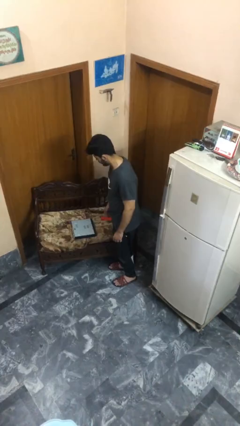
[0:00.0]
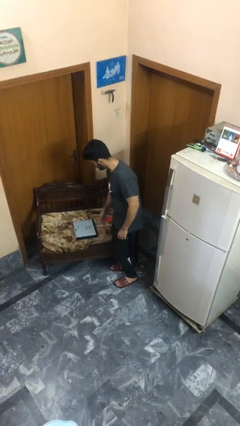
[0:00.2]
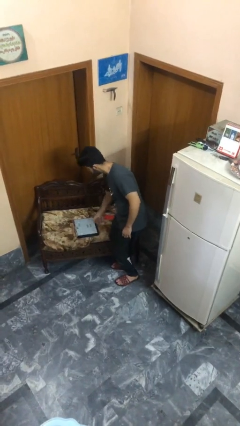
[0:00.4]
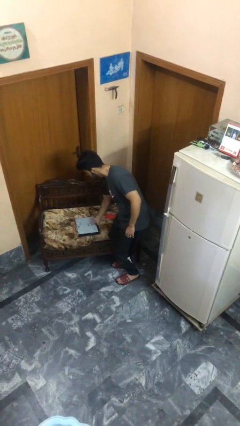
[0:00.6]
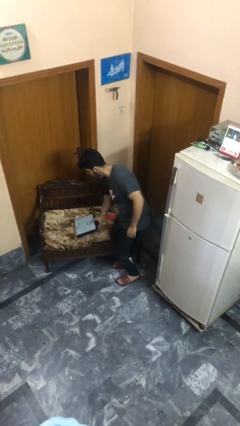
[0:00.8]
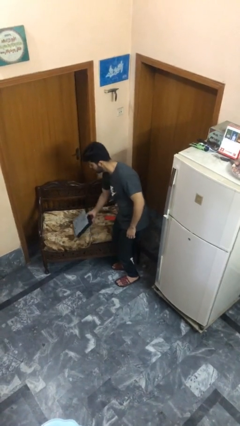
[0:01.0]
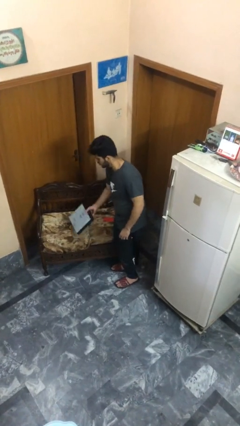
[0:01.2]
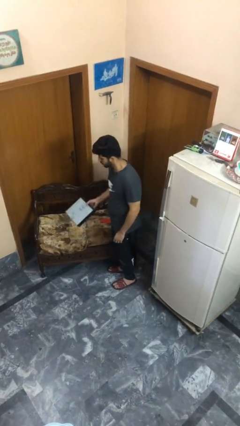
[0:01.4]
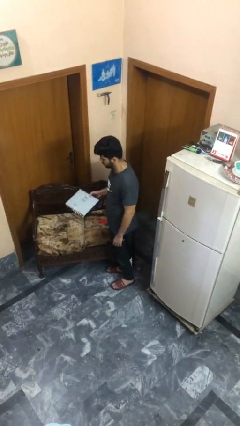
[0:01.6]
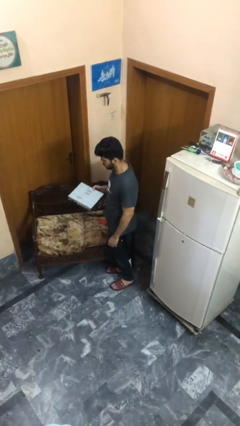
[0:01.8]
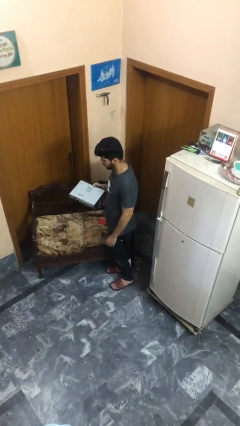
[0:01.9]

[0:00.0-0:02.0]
person picks up object from couch

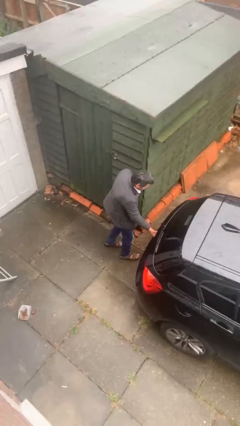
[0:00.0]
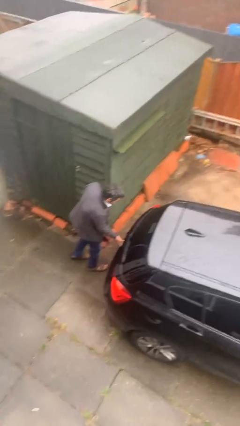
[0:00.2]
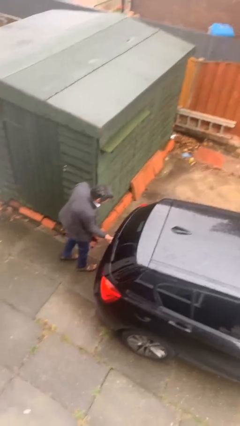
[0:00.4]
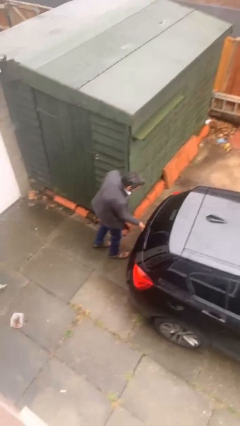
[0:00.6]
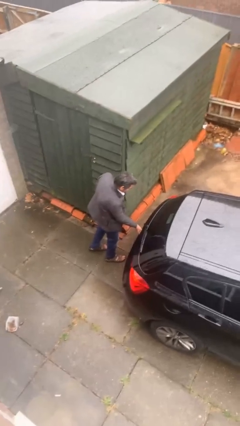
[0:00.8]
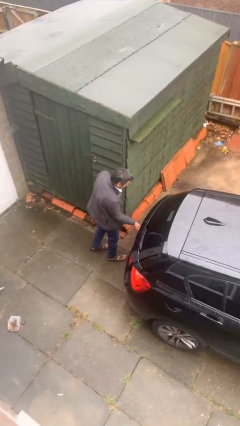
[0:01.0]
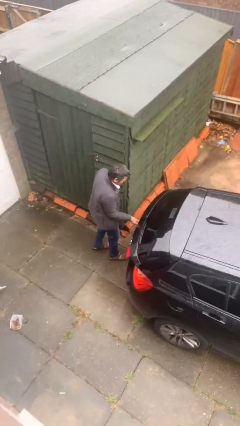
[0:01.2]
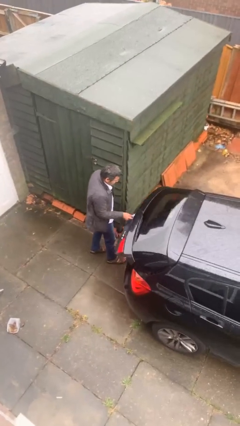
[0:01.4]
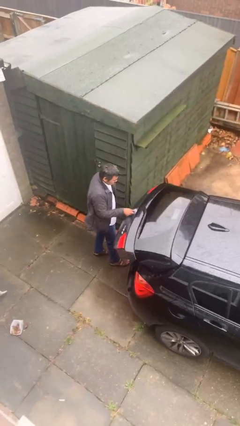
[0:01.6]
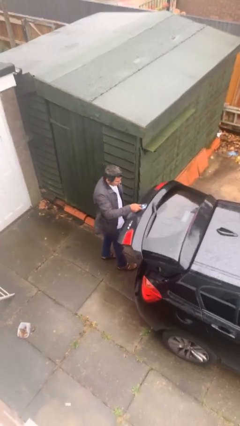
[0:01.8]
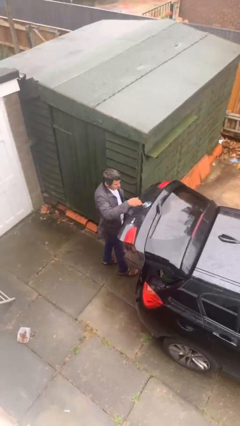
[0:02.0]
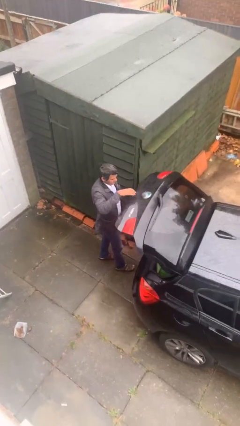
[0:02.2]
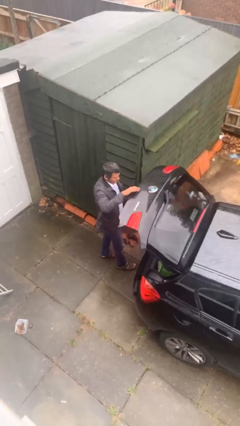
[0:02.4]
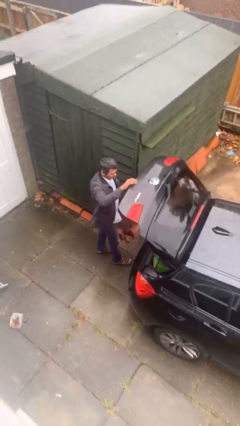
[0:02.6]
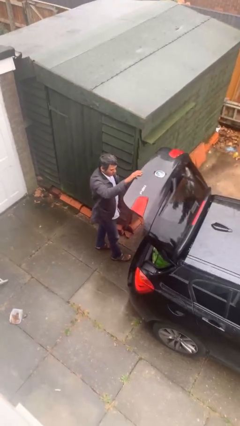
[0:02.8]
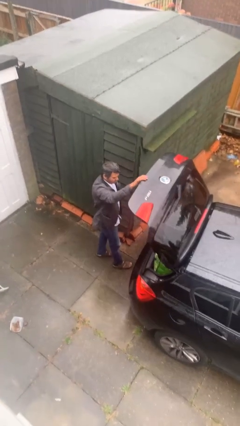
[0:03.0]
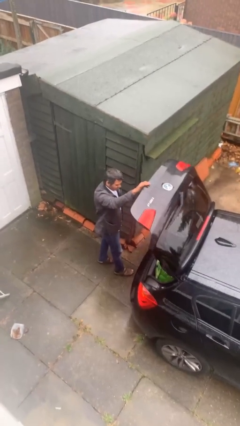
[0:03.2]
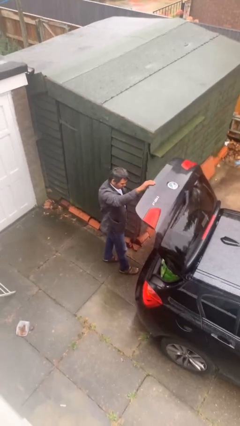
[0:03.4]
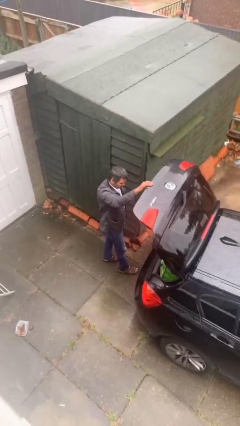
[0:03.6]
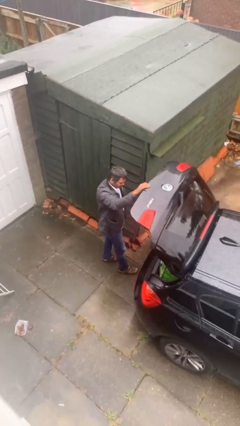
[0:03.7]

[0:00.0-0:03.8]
person opens car trunk

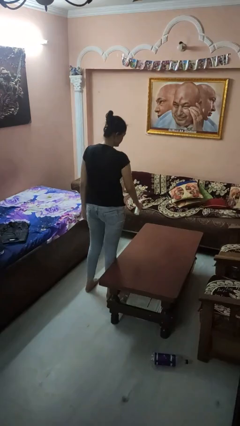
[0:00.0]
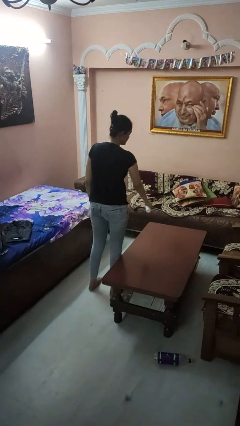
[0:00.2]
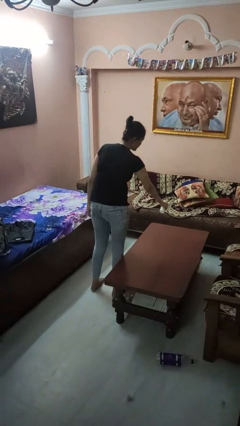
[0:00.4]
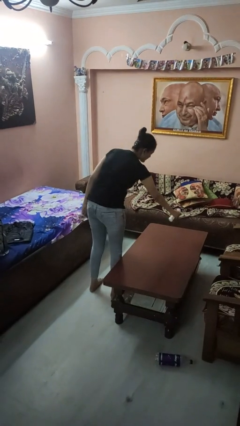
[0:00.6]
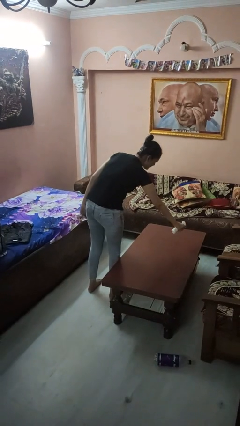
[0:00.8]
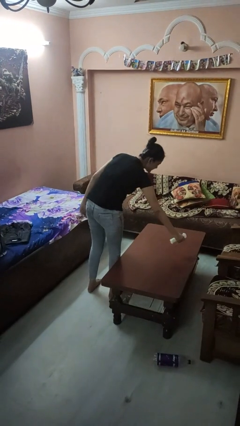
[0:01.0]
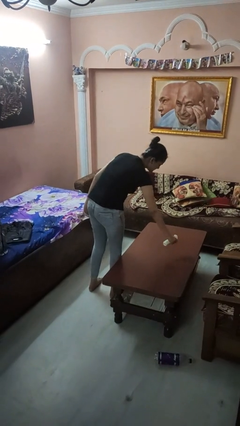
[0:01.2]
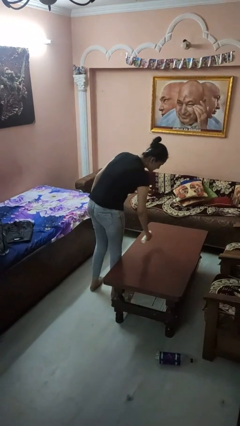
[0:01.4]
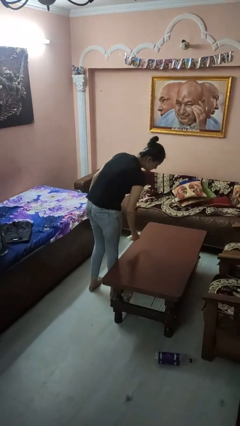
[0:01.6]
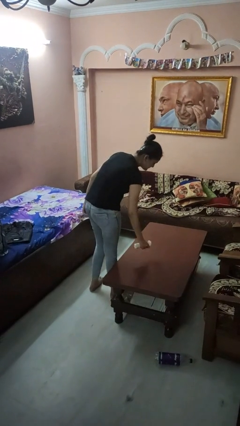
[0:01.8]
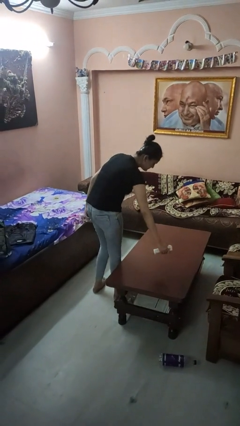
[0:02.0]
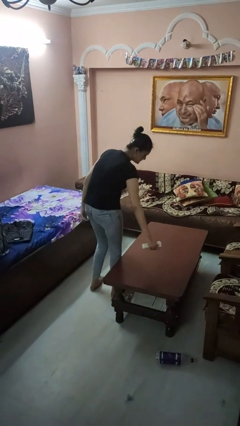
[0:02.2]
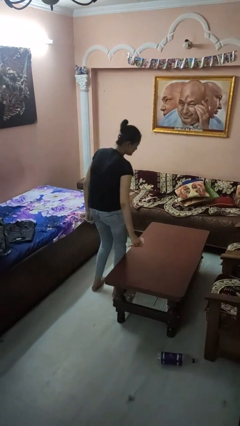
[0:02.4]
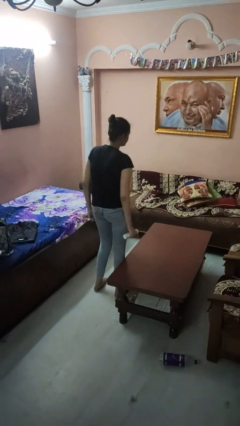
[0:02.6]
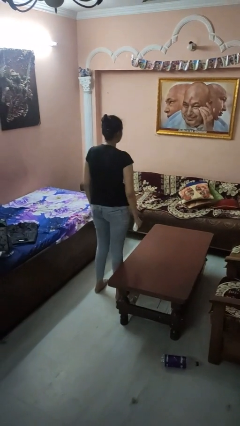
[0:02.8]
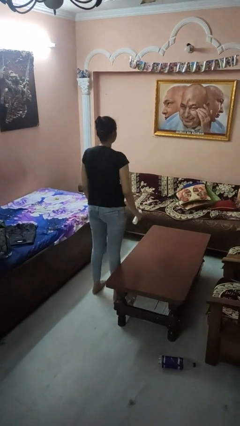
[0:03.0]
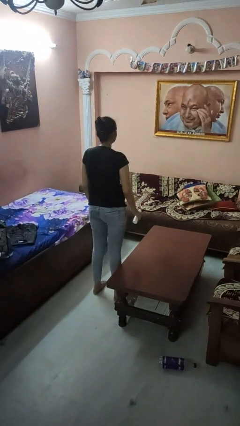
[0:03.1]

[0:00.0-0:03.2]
person sprays from bottle

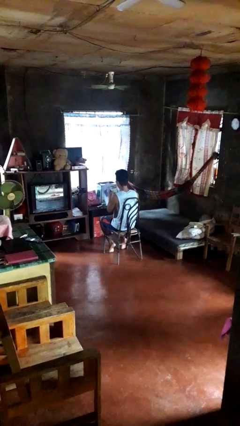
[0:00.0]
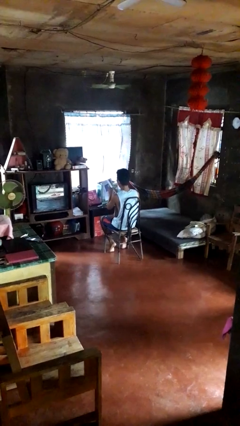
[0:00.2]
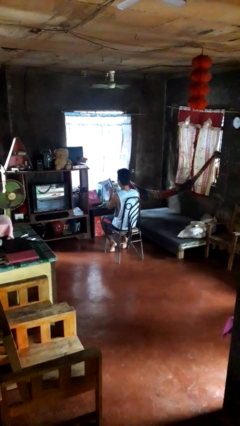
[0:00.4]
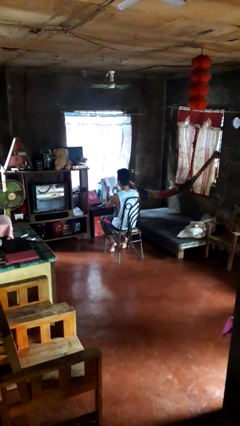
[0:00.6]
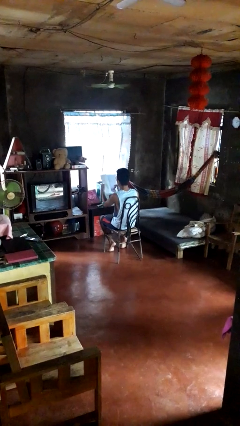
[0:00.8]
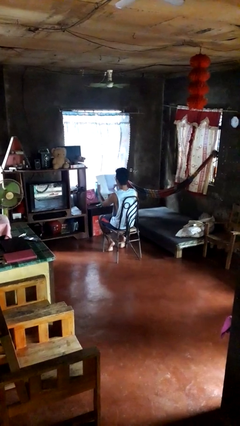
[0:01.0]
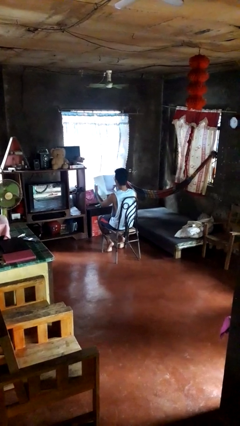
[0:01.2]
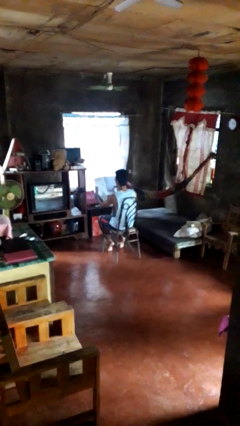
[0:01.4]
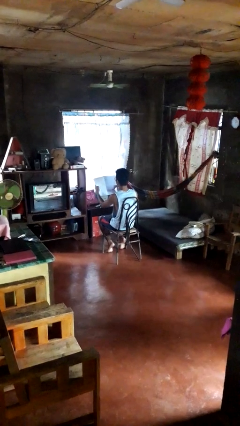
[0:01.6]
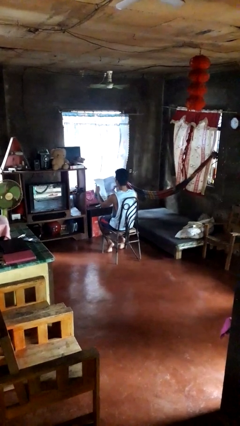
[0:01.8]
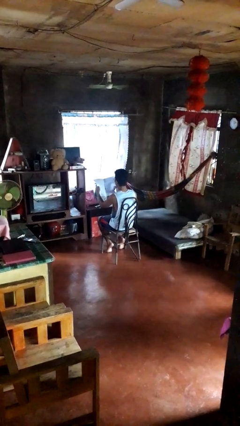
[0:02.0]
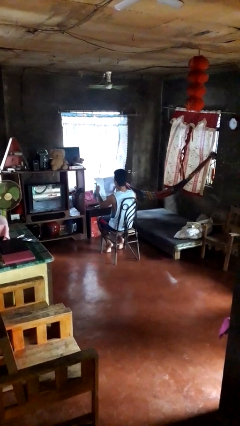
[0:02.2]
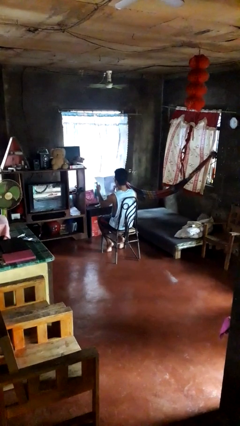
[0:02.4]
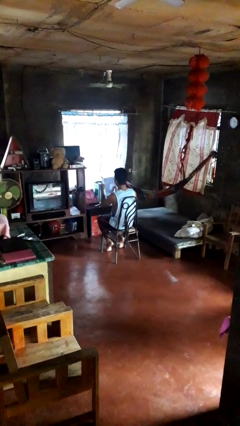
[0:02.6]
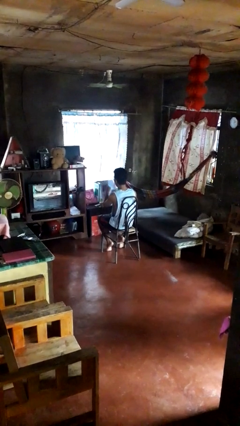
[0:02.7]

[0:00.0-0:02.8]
person reads newspaper

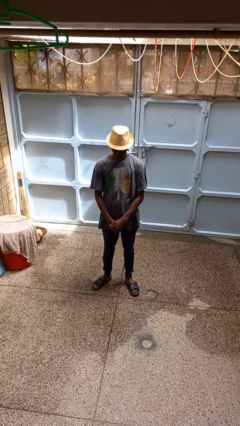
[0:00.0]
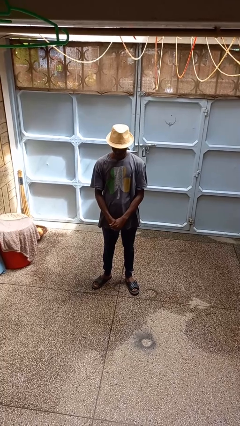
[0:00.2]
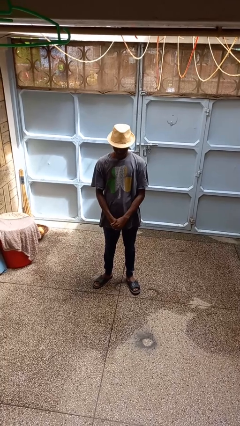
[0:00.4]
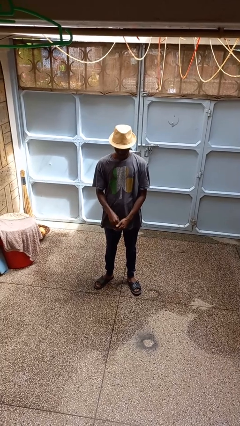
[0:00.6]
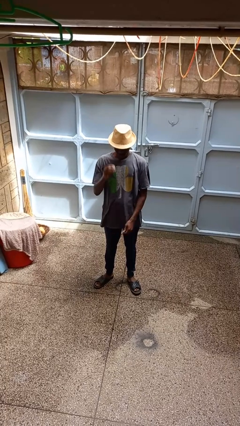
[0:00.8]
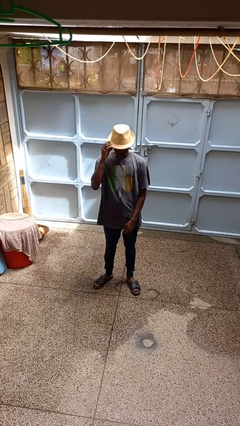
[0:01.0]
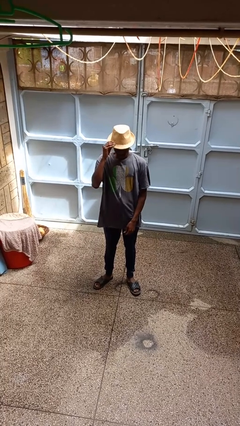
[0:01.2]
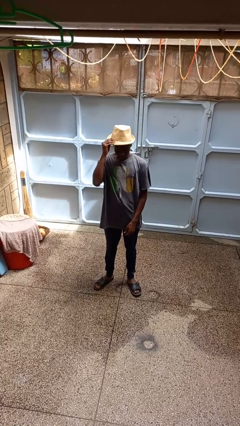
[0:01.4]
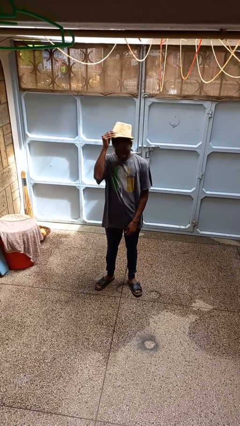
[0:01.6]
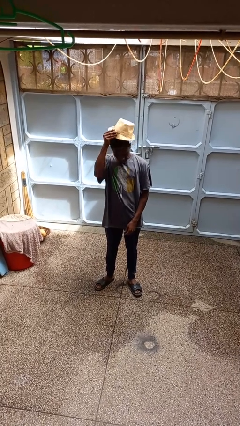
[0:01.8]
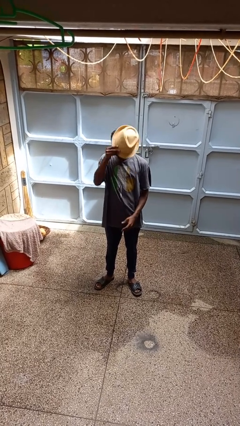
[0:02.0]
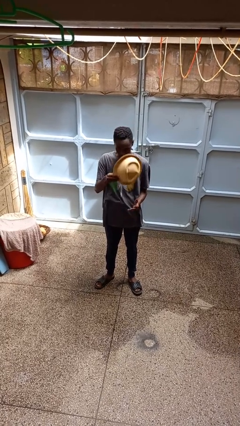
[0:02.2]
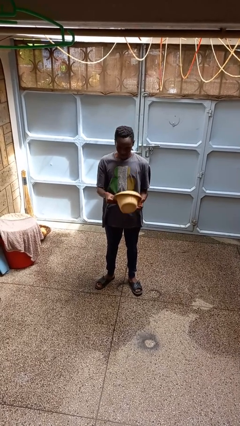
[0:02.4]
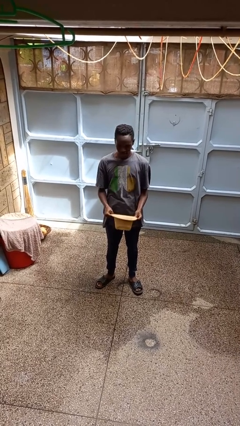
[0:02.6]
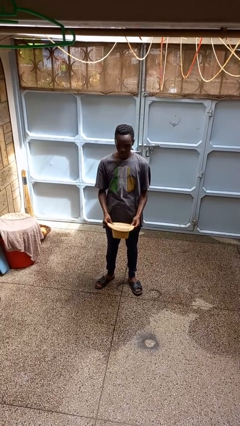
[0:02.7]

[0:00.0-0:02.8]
person takes off hat

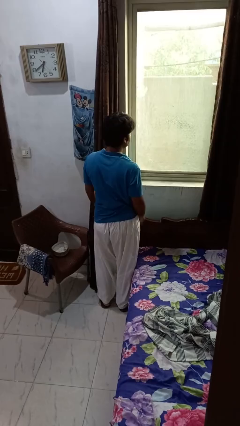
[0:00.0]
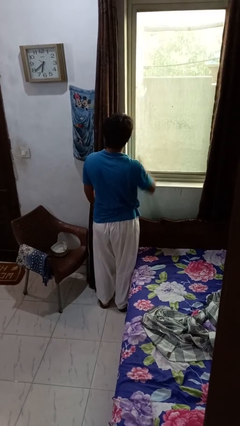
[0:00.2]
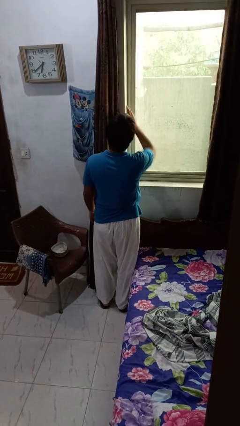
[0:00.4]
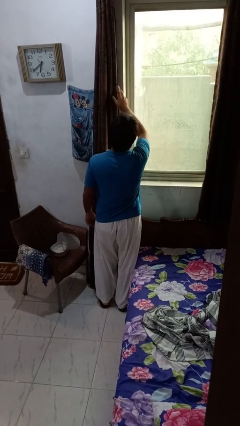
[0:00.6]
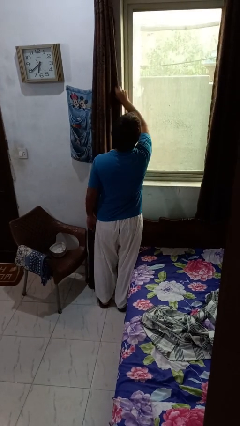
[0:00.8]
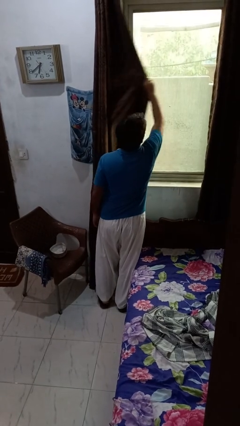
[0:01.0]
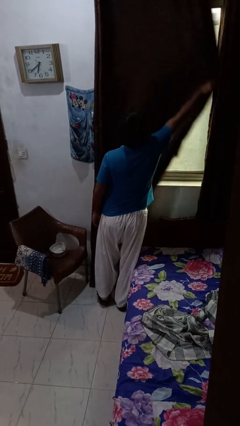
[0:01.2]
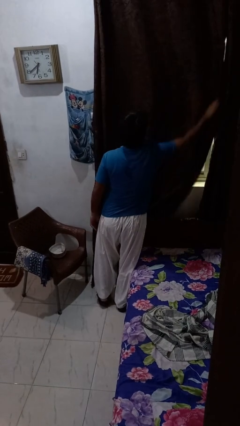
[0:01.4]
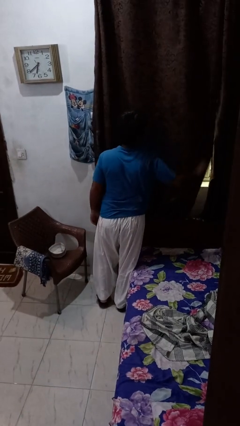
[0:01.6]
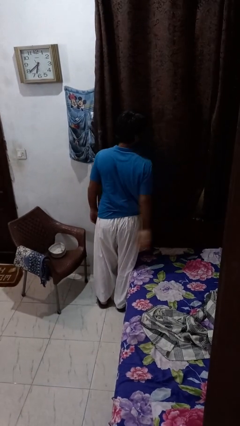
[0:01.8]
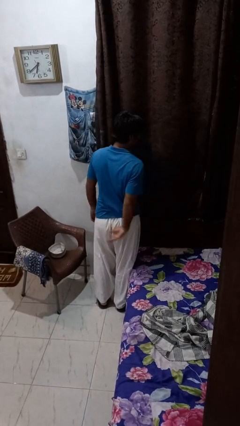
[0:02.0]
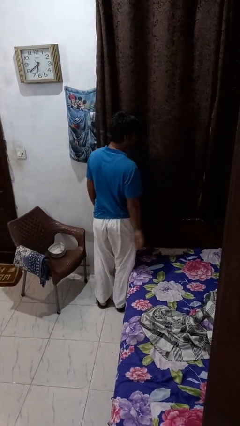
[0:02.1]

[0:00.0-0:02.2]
person closes curtains

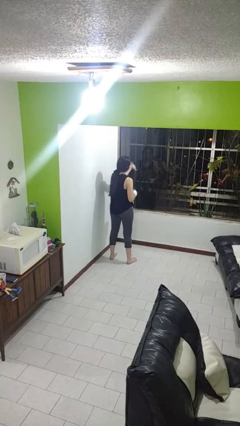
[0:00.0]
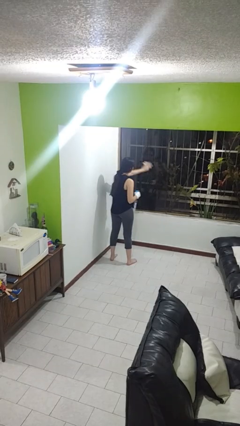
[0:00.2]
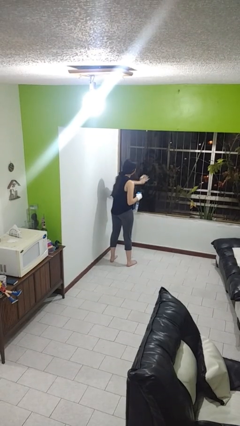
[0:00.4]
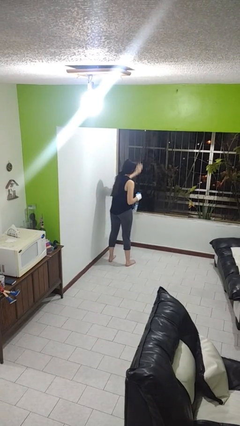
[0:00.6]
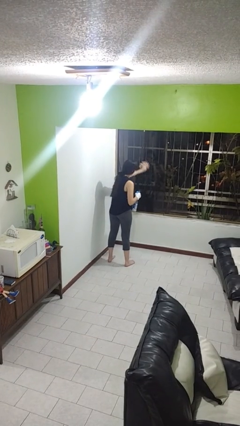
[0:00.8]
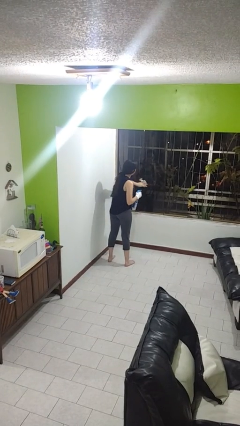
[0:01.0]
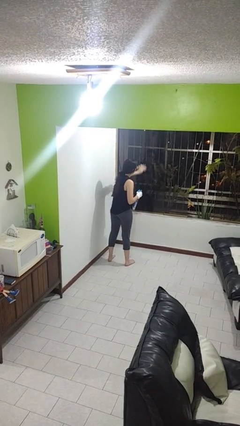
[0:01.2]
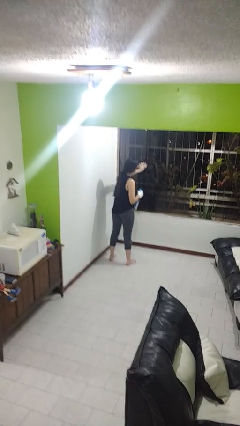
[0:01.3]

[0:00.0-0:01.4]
person washes window
